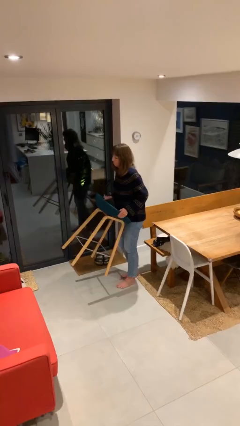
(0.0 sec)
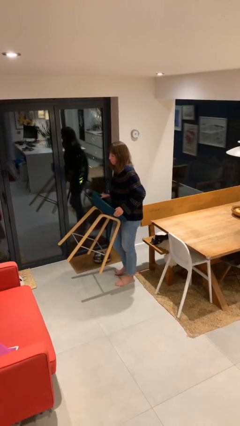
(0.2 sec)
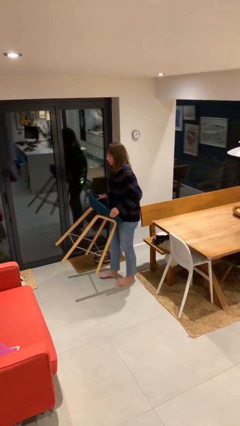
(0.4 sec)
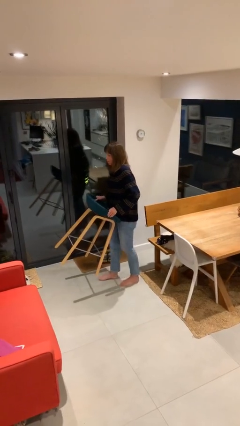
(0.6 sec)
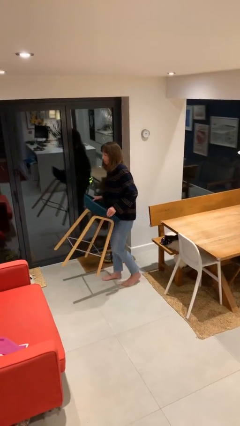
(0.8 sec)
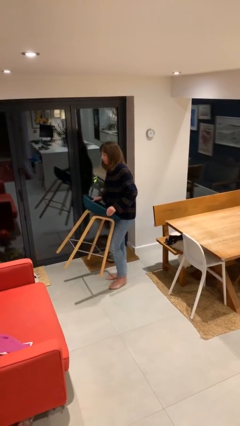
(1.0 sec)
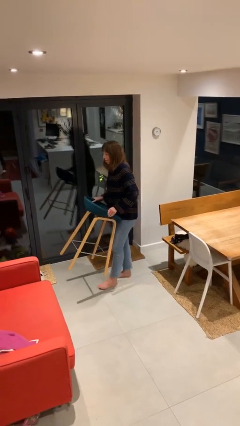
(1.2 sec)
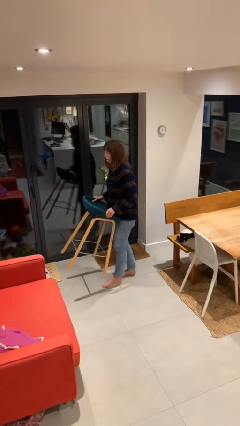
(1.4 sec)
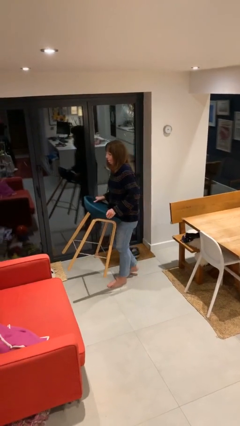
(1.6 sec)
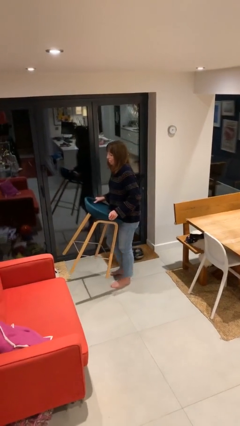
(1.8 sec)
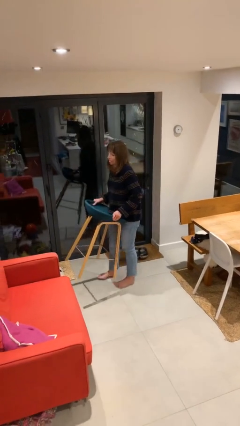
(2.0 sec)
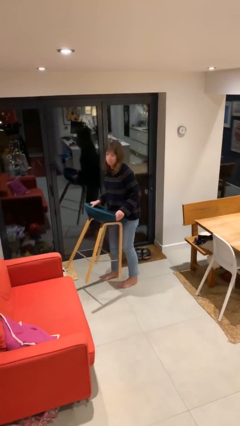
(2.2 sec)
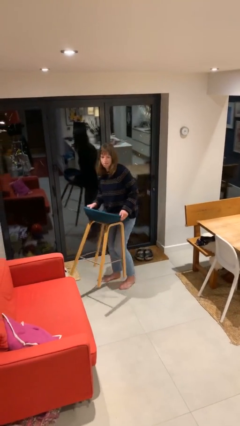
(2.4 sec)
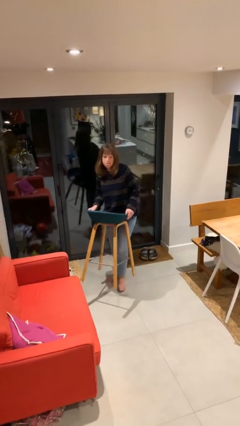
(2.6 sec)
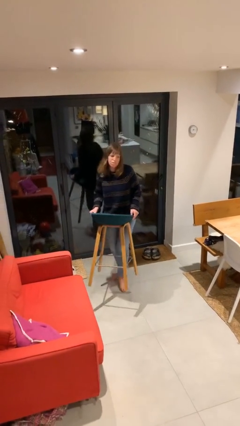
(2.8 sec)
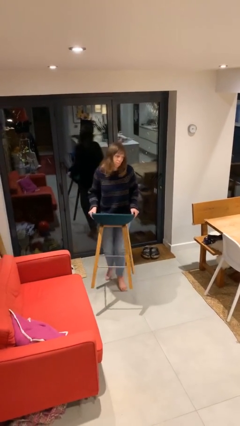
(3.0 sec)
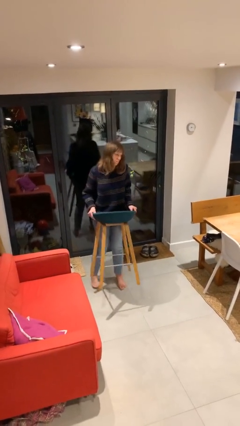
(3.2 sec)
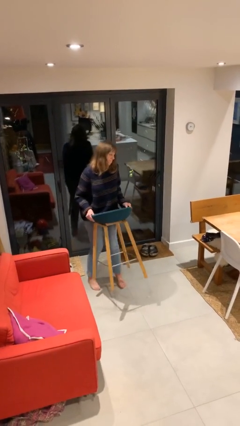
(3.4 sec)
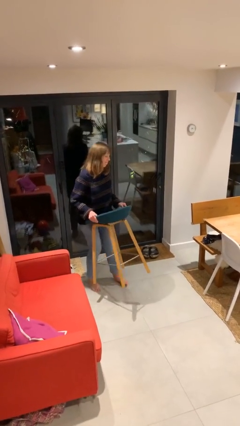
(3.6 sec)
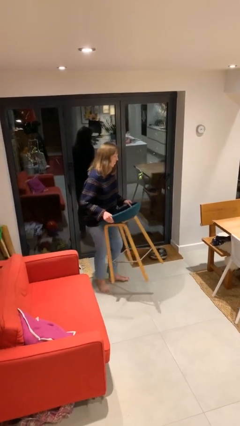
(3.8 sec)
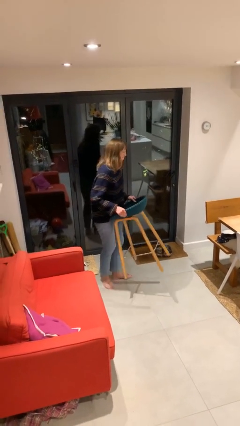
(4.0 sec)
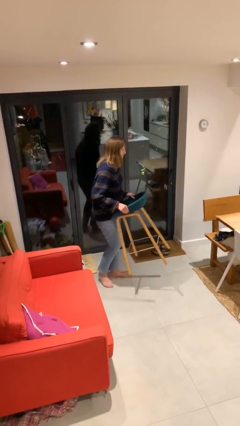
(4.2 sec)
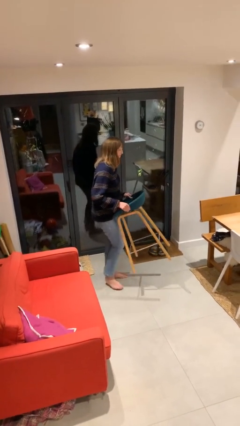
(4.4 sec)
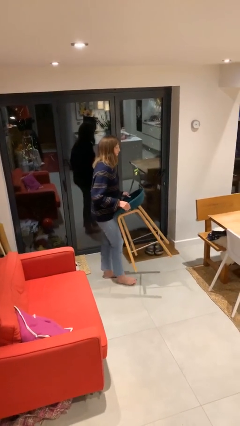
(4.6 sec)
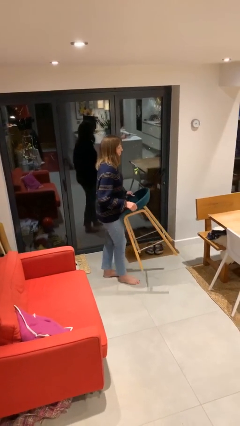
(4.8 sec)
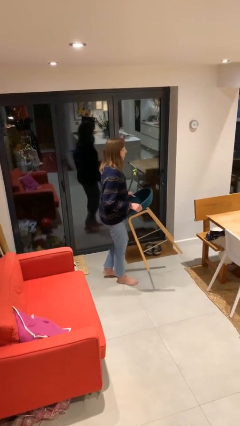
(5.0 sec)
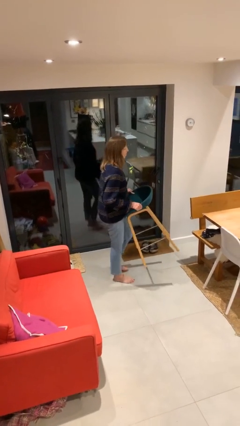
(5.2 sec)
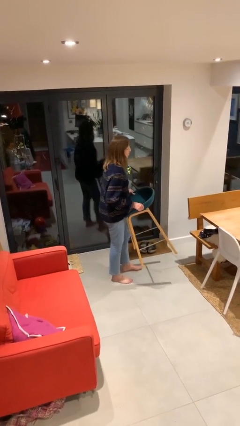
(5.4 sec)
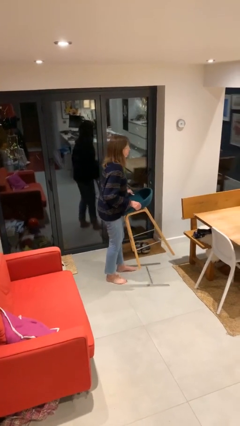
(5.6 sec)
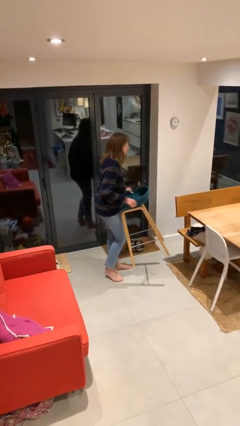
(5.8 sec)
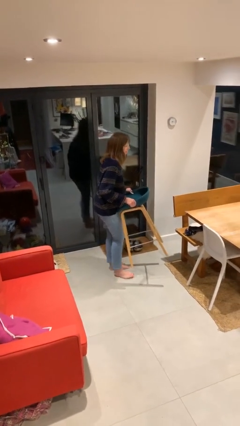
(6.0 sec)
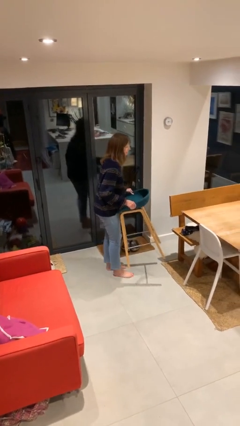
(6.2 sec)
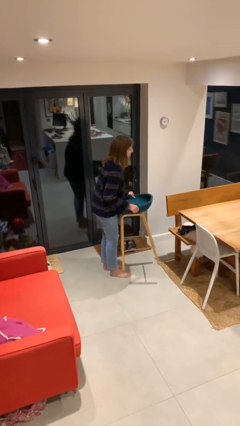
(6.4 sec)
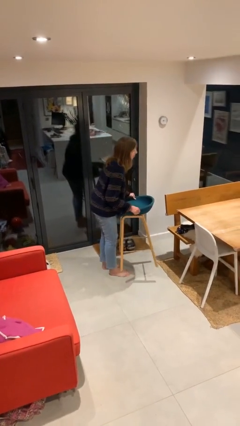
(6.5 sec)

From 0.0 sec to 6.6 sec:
person carries heavy object

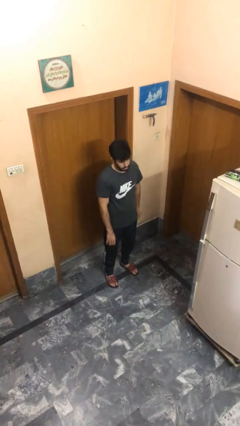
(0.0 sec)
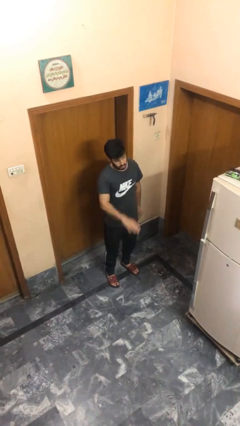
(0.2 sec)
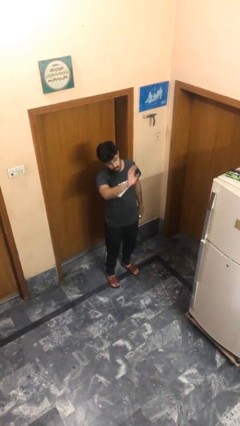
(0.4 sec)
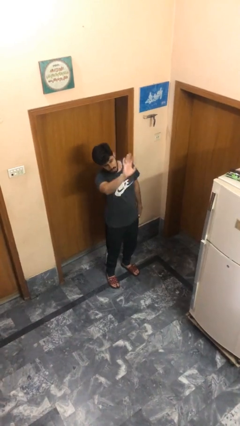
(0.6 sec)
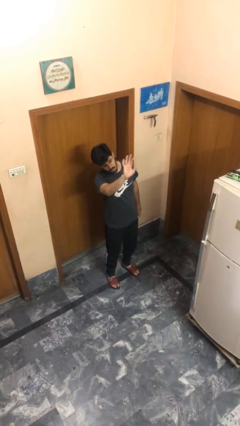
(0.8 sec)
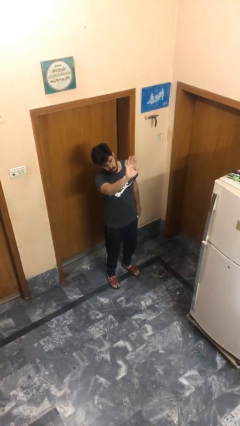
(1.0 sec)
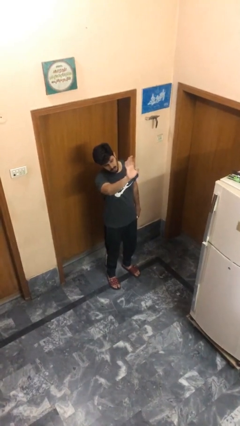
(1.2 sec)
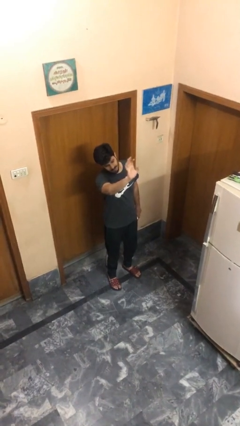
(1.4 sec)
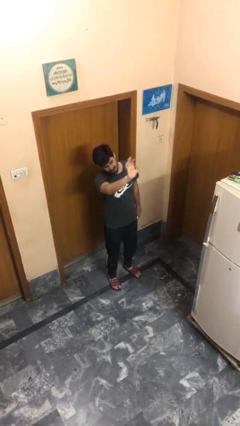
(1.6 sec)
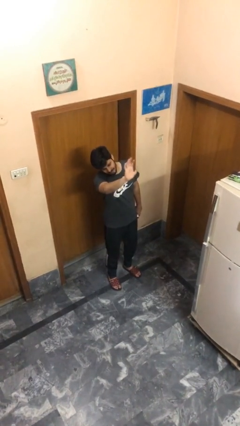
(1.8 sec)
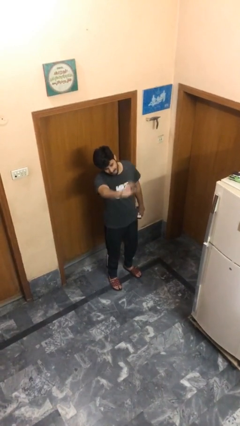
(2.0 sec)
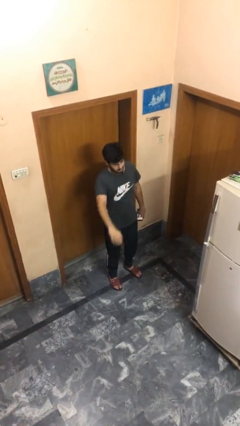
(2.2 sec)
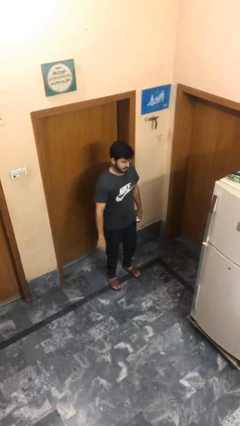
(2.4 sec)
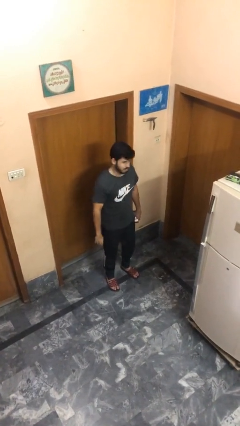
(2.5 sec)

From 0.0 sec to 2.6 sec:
person waves at person

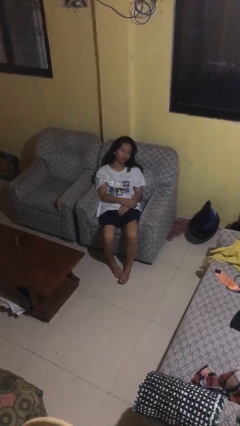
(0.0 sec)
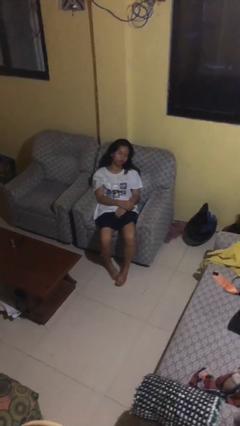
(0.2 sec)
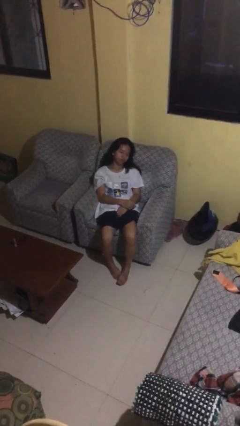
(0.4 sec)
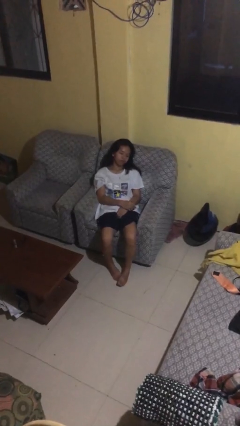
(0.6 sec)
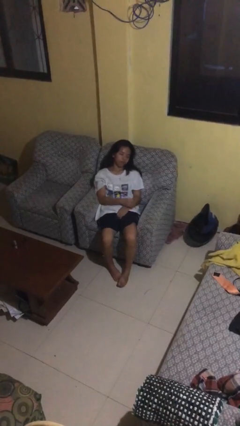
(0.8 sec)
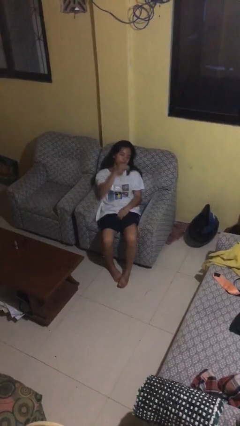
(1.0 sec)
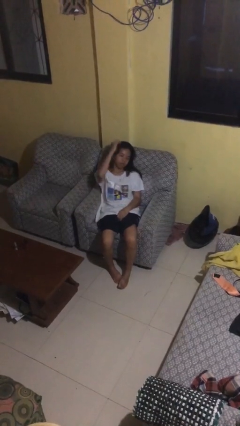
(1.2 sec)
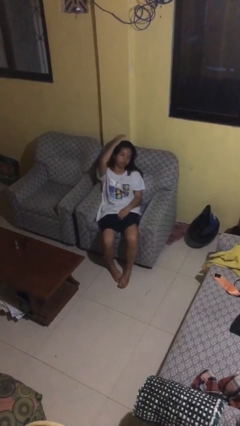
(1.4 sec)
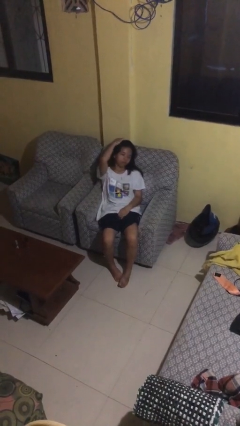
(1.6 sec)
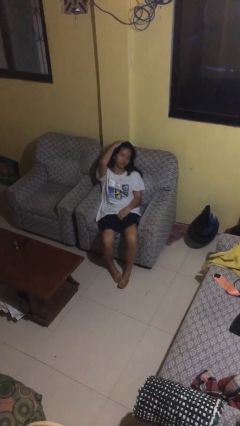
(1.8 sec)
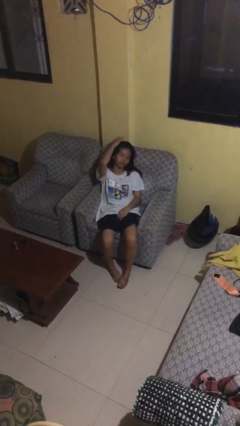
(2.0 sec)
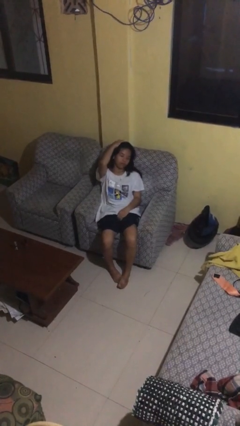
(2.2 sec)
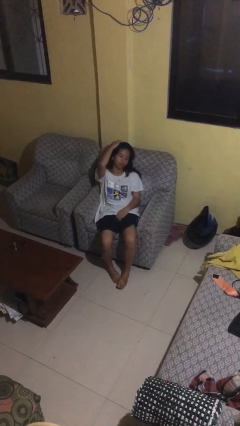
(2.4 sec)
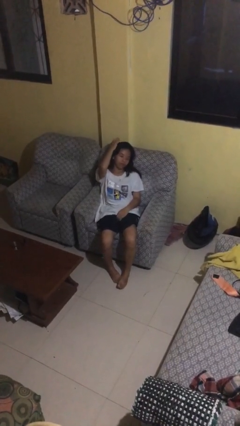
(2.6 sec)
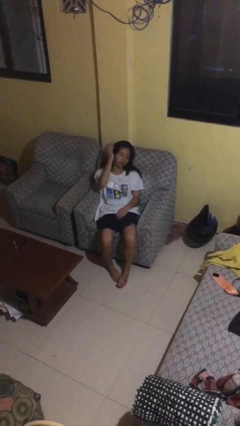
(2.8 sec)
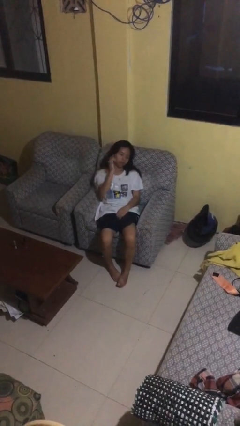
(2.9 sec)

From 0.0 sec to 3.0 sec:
person pats head

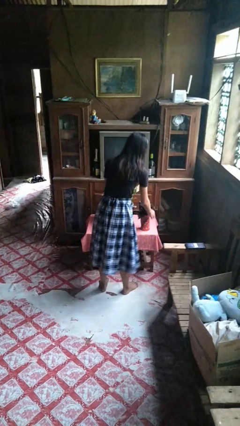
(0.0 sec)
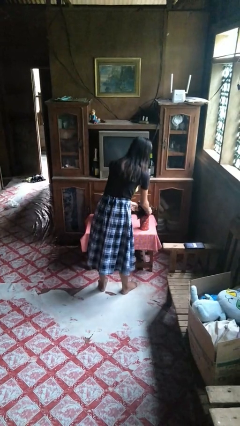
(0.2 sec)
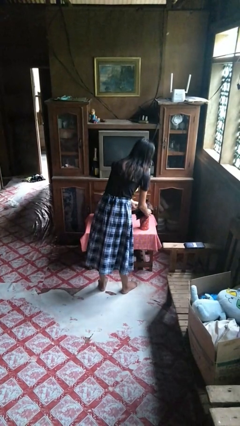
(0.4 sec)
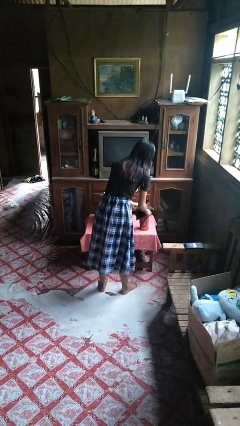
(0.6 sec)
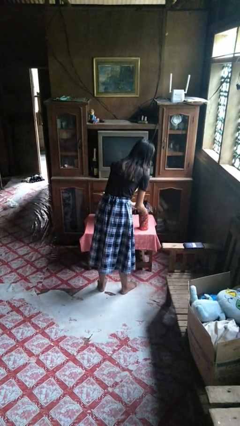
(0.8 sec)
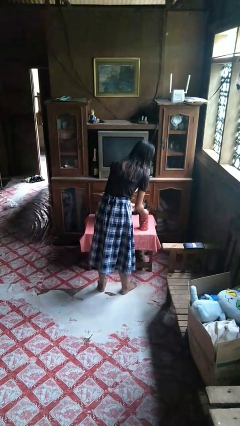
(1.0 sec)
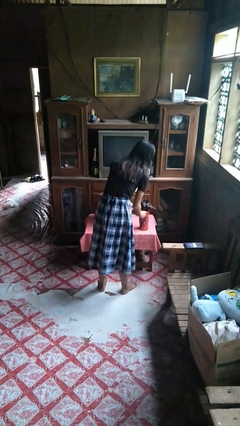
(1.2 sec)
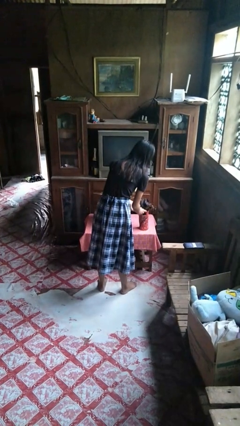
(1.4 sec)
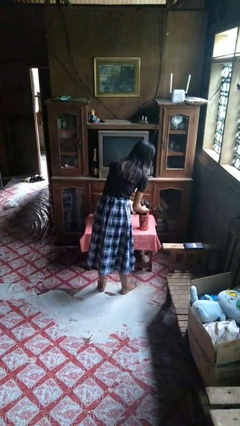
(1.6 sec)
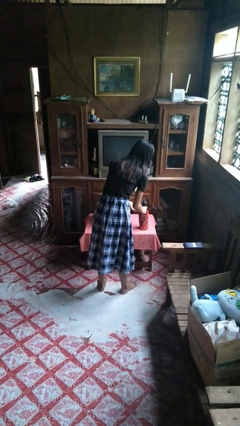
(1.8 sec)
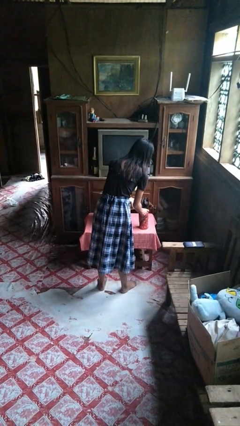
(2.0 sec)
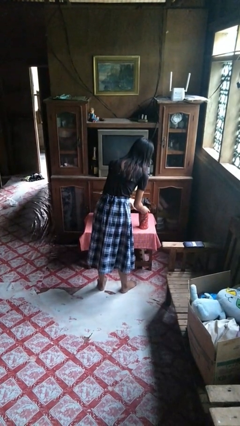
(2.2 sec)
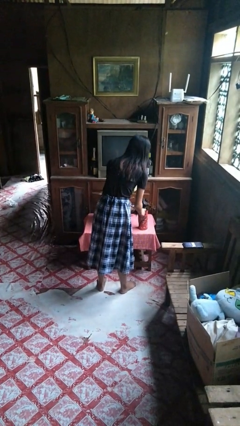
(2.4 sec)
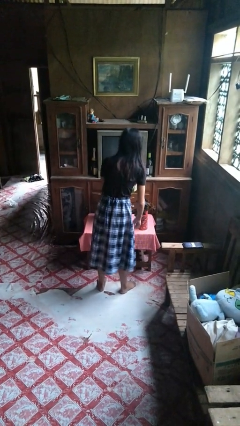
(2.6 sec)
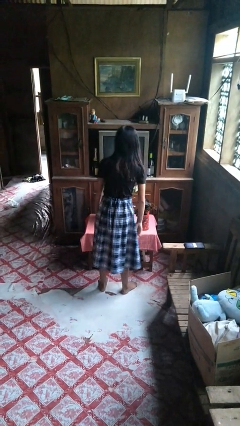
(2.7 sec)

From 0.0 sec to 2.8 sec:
person arranges flowers in vase

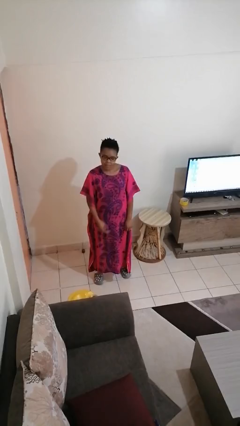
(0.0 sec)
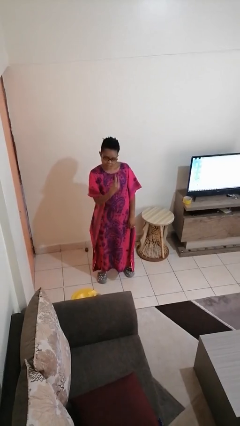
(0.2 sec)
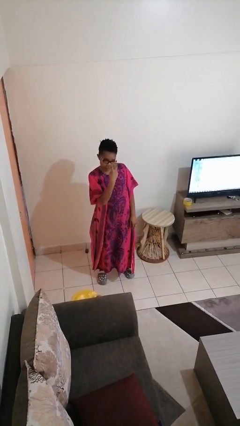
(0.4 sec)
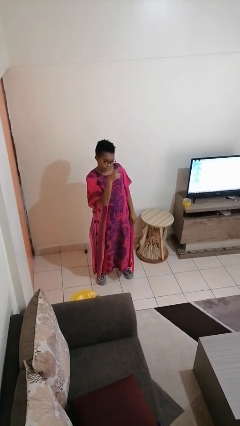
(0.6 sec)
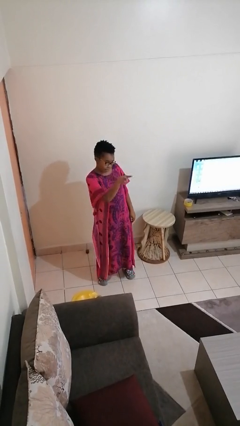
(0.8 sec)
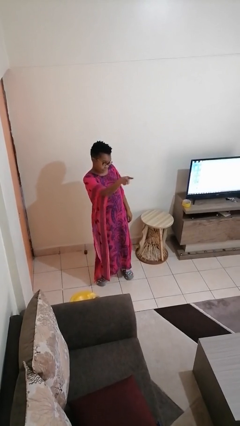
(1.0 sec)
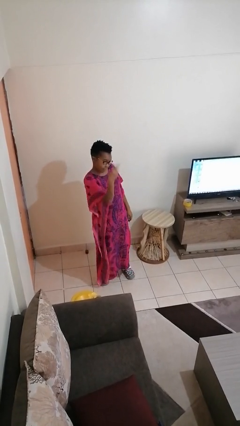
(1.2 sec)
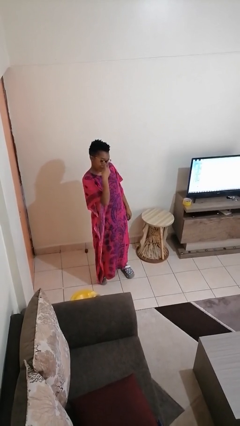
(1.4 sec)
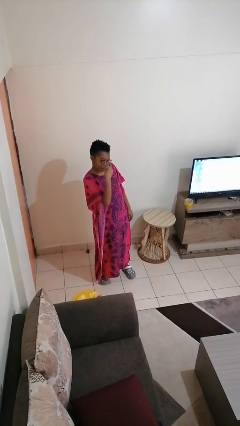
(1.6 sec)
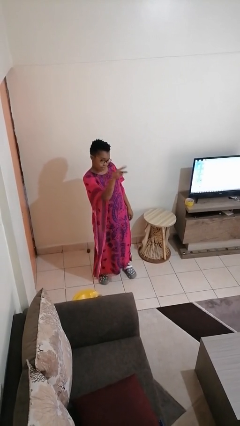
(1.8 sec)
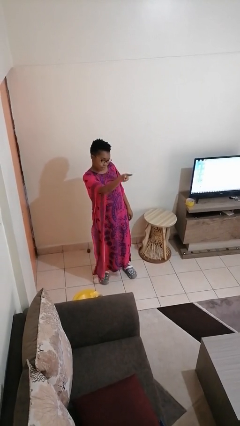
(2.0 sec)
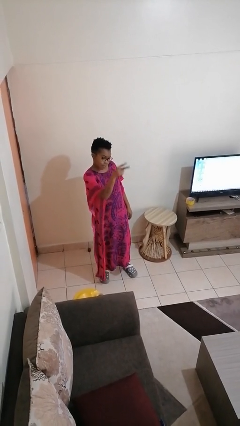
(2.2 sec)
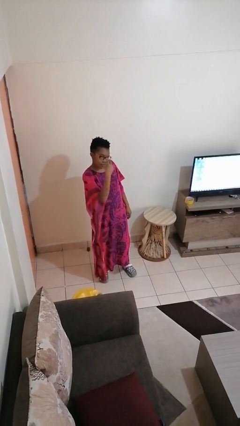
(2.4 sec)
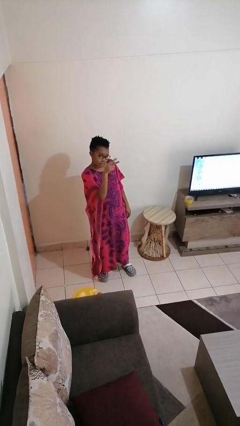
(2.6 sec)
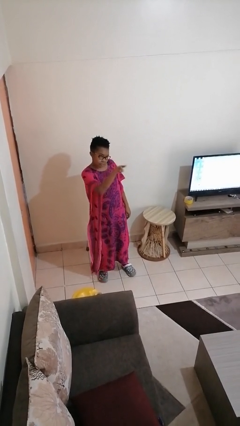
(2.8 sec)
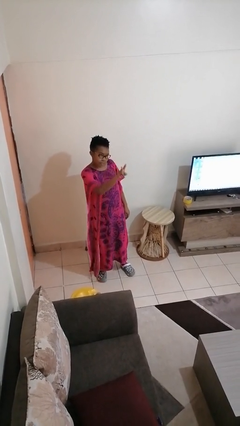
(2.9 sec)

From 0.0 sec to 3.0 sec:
person gestures watch closely
